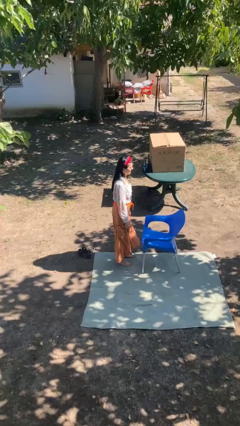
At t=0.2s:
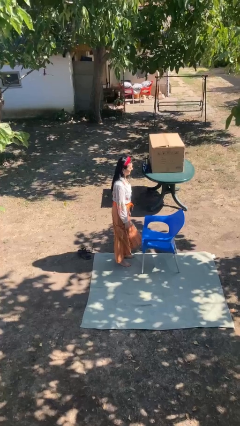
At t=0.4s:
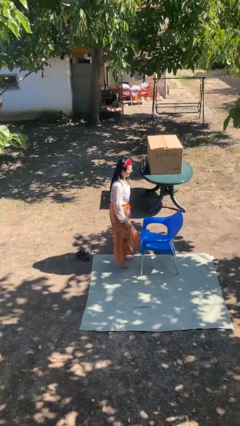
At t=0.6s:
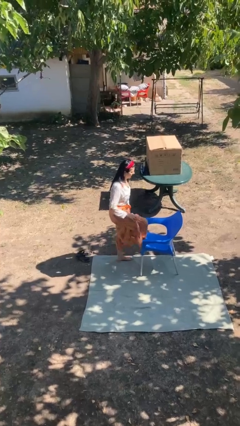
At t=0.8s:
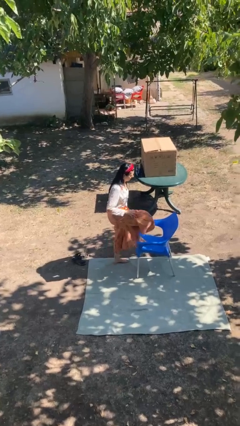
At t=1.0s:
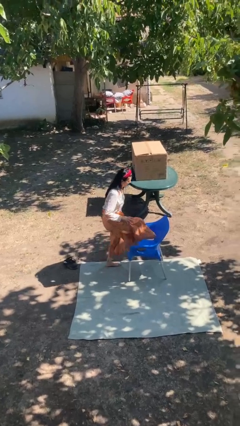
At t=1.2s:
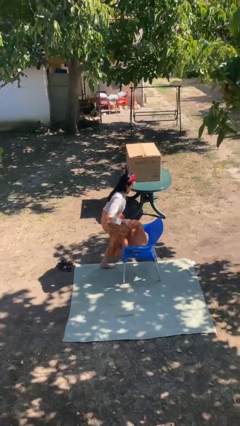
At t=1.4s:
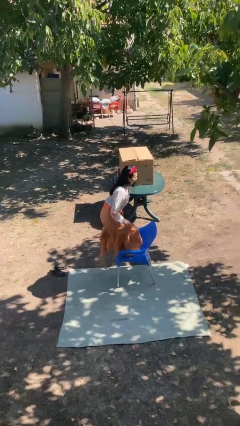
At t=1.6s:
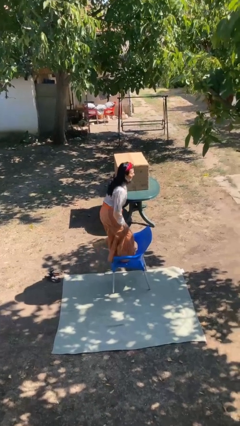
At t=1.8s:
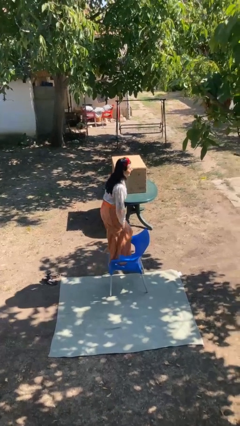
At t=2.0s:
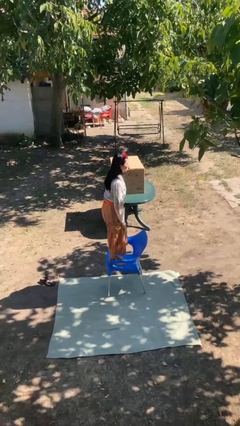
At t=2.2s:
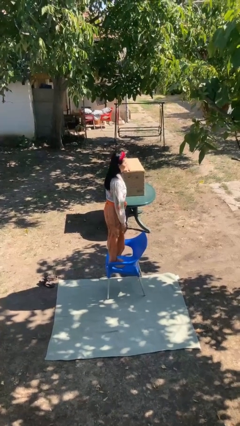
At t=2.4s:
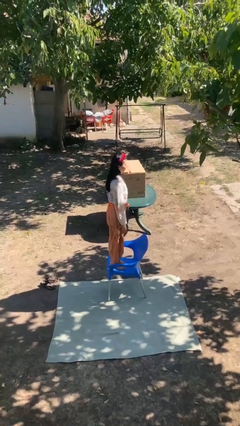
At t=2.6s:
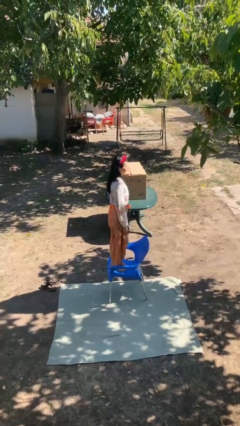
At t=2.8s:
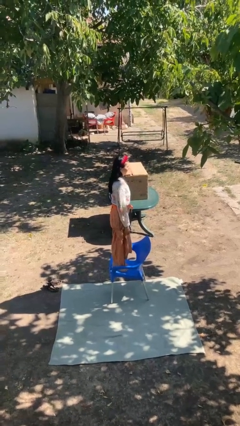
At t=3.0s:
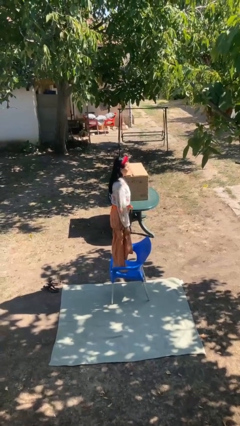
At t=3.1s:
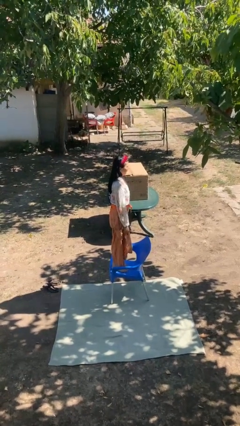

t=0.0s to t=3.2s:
person climbs on chair

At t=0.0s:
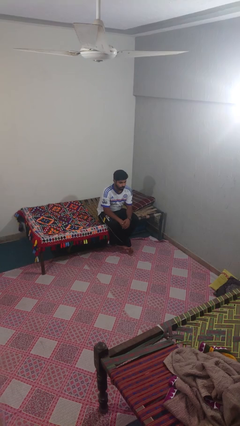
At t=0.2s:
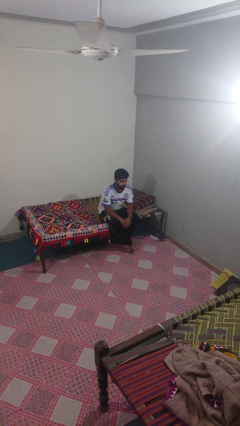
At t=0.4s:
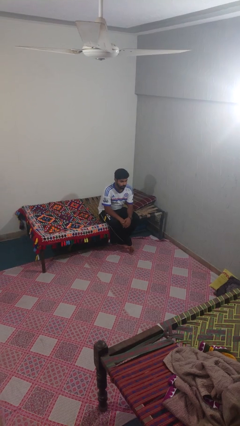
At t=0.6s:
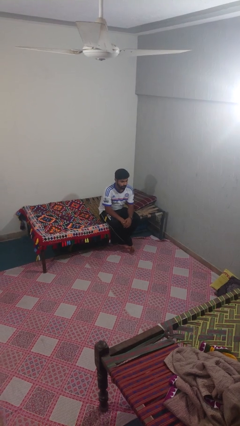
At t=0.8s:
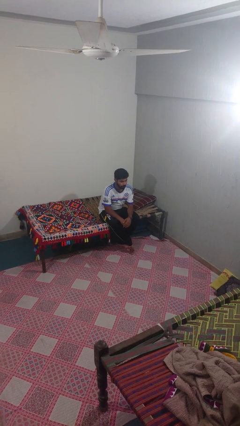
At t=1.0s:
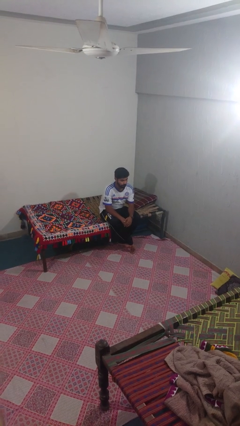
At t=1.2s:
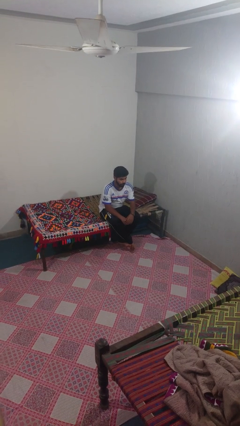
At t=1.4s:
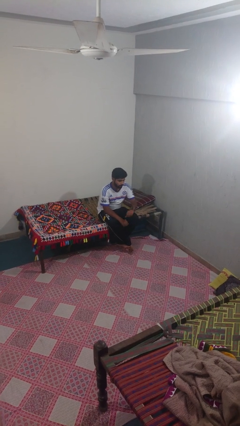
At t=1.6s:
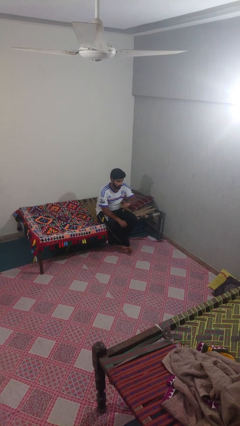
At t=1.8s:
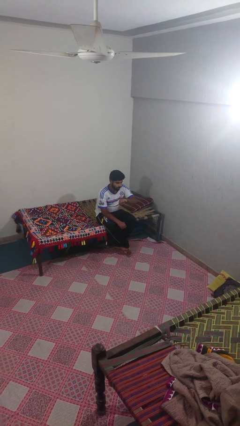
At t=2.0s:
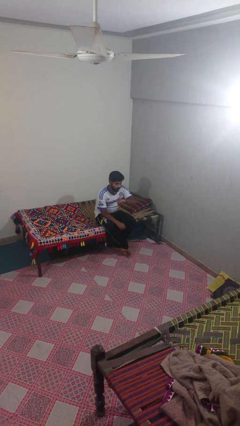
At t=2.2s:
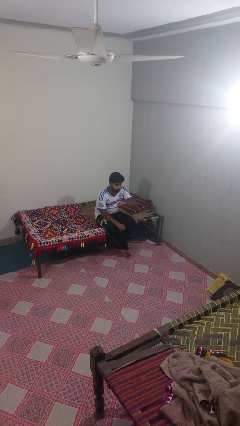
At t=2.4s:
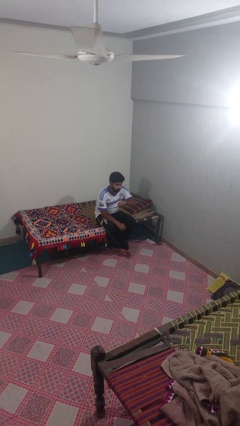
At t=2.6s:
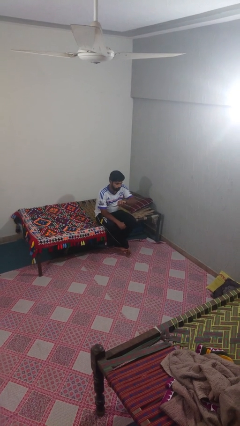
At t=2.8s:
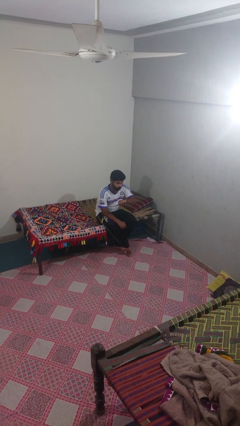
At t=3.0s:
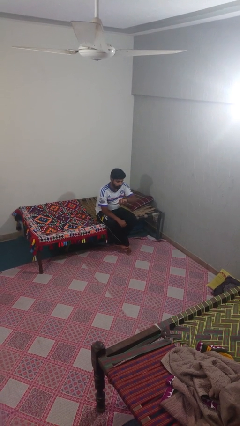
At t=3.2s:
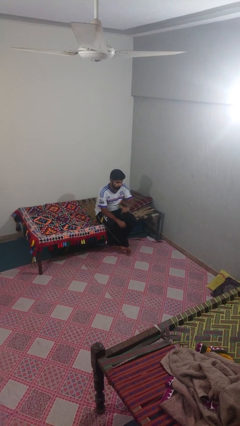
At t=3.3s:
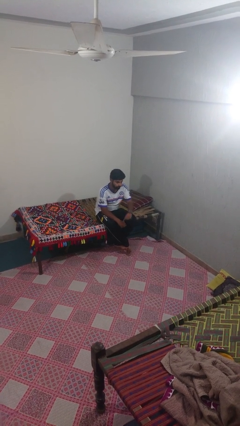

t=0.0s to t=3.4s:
person looks at wristwatch

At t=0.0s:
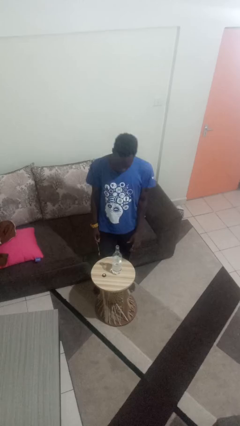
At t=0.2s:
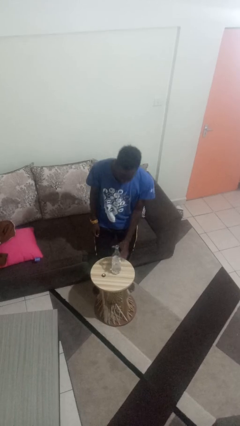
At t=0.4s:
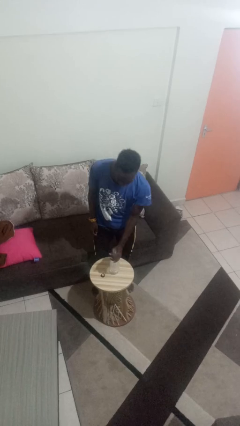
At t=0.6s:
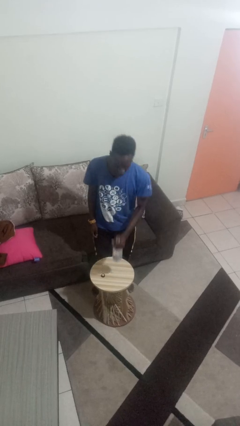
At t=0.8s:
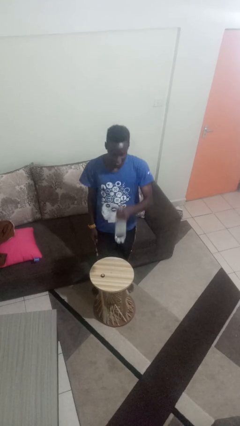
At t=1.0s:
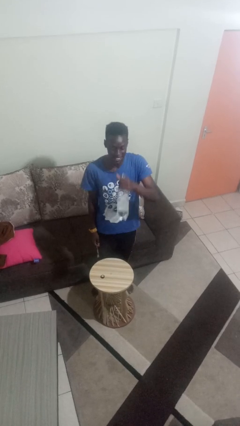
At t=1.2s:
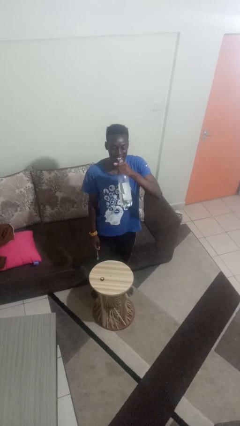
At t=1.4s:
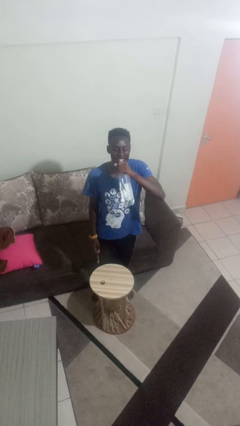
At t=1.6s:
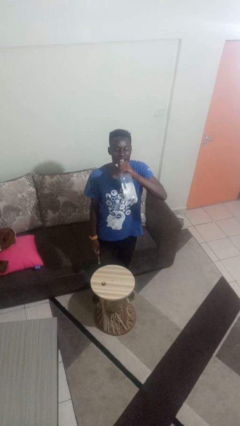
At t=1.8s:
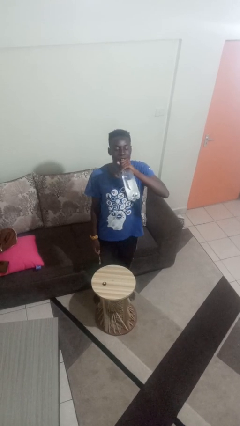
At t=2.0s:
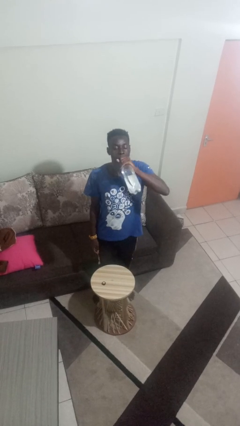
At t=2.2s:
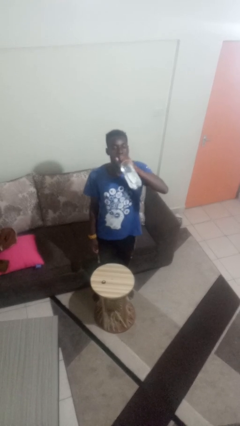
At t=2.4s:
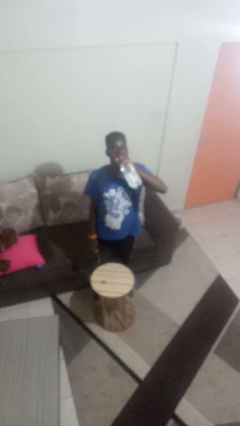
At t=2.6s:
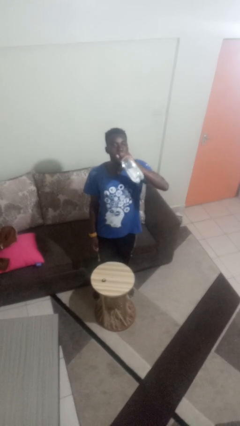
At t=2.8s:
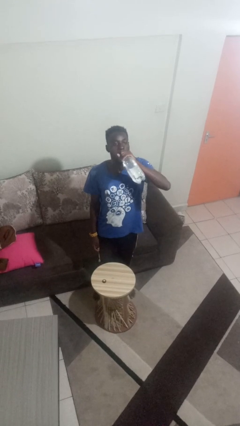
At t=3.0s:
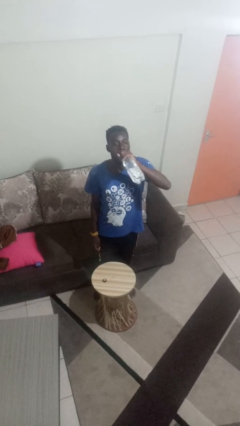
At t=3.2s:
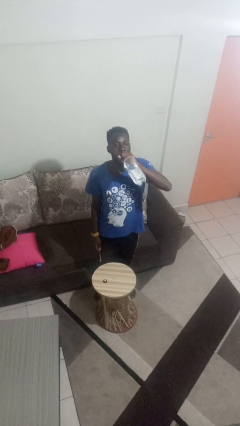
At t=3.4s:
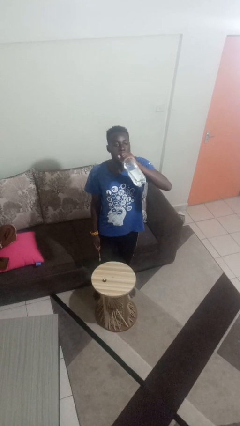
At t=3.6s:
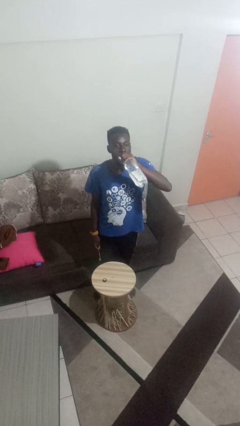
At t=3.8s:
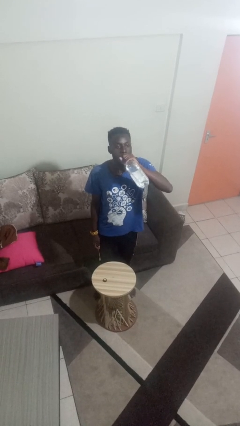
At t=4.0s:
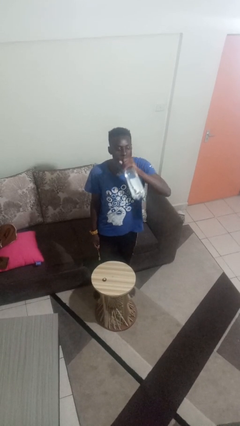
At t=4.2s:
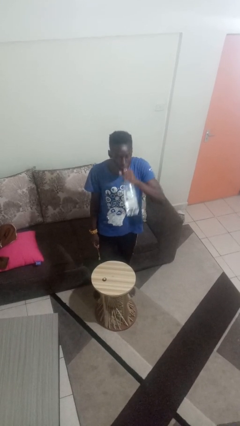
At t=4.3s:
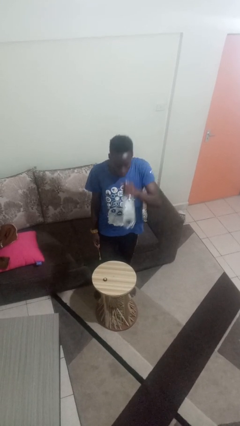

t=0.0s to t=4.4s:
person drinks from bottle

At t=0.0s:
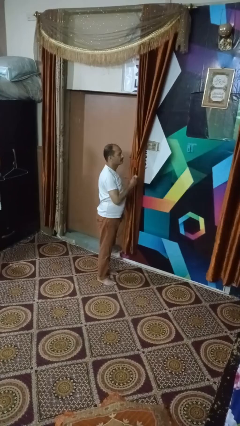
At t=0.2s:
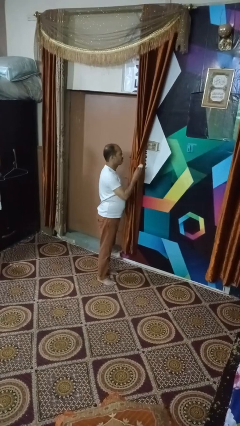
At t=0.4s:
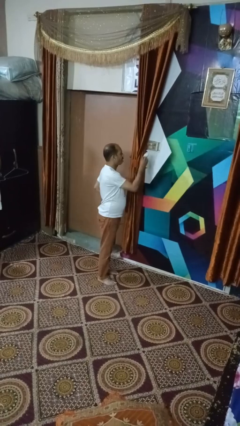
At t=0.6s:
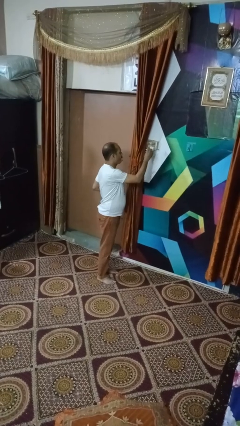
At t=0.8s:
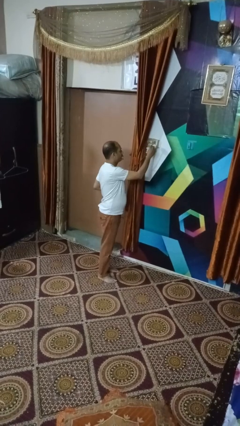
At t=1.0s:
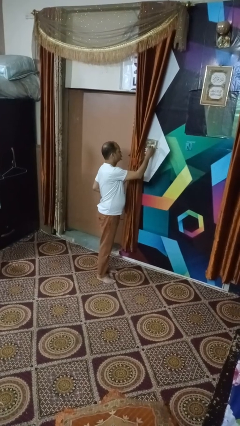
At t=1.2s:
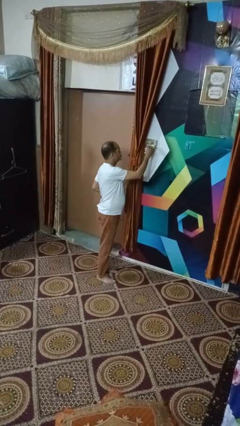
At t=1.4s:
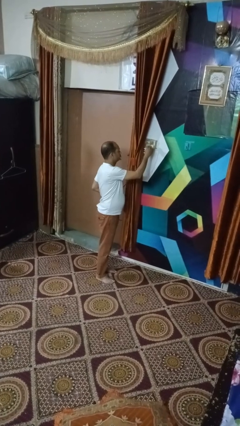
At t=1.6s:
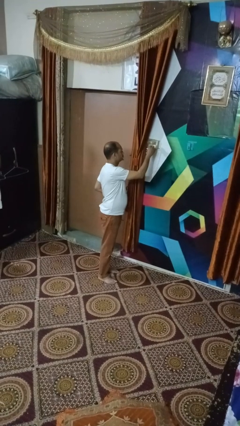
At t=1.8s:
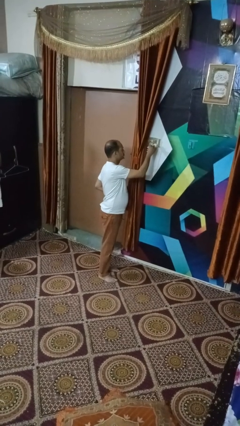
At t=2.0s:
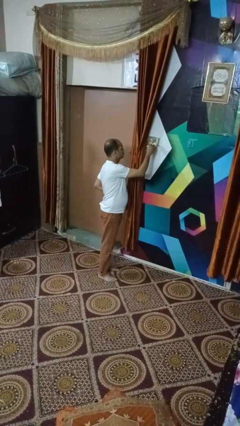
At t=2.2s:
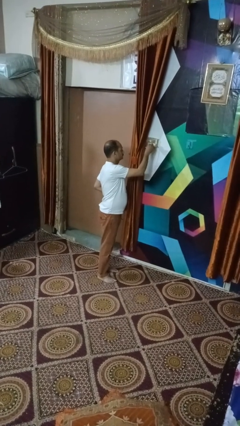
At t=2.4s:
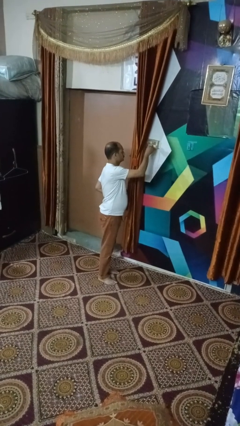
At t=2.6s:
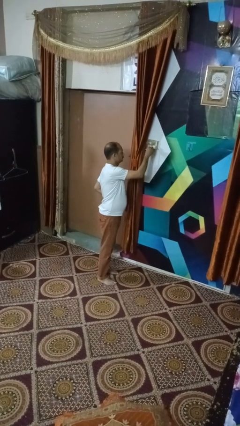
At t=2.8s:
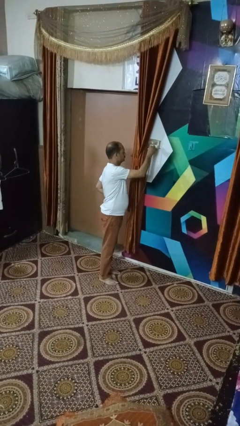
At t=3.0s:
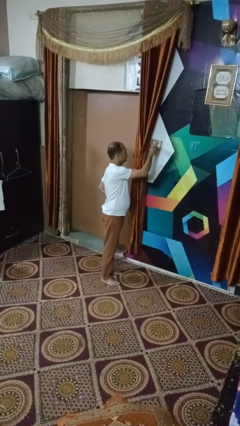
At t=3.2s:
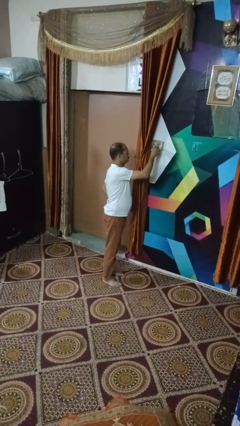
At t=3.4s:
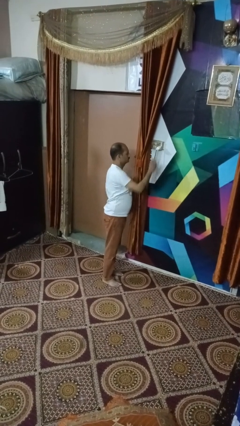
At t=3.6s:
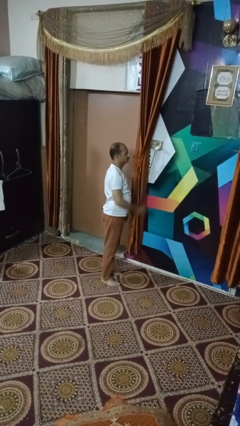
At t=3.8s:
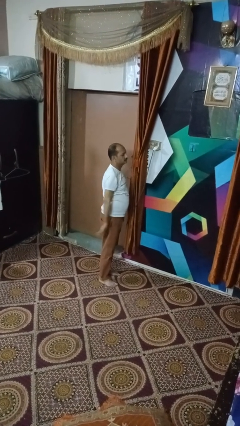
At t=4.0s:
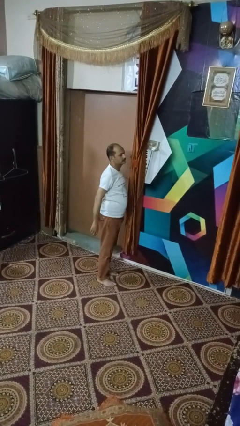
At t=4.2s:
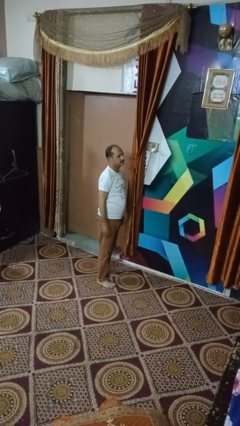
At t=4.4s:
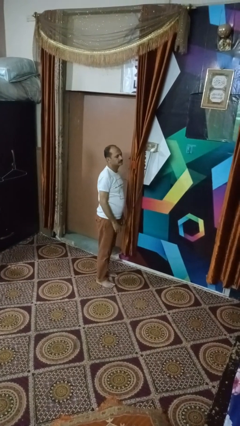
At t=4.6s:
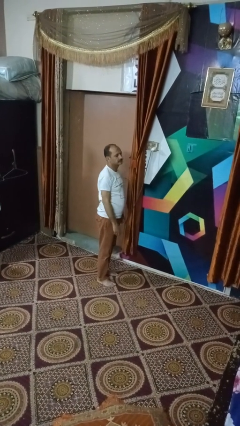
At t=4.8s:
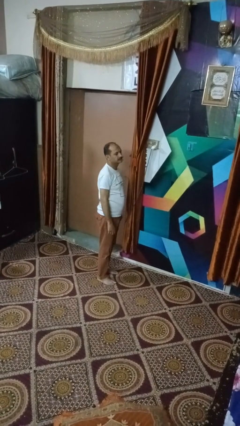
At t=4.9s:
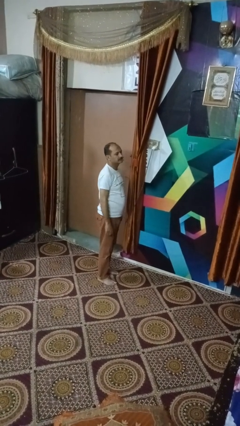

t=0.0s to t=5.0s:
person plugs into electrical socket

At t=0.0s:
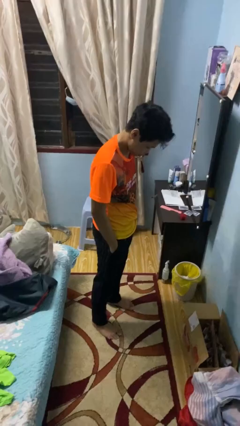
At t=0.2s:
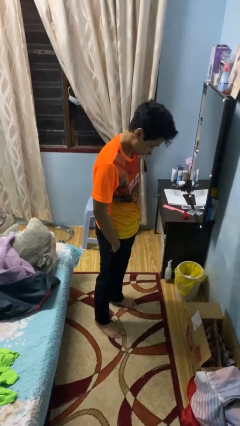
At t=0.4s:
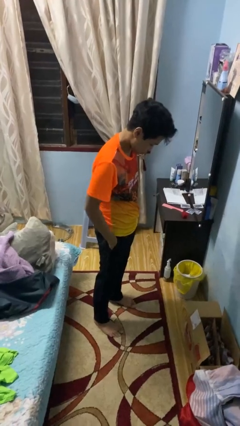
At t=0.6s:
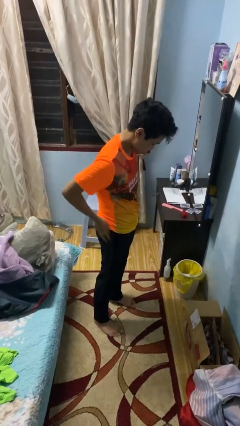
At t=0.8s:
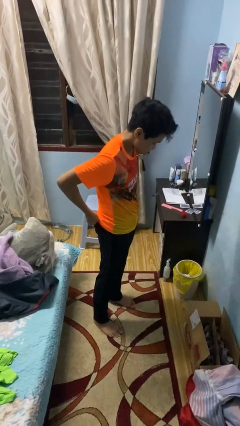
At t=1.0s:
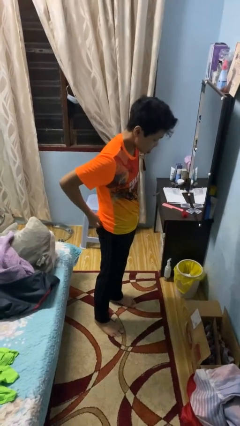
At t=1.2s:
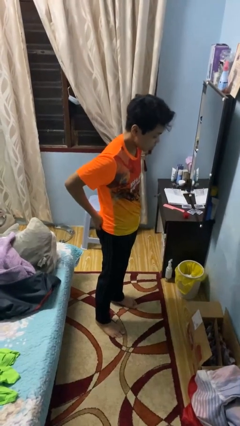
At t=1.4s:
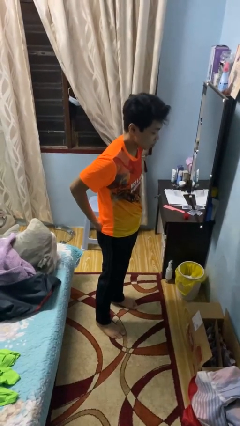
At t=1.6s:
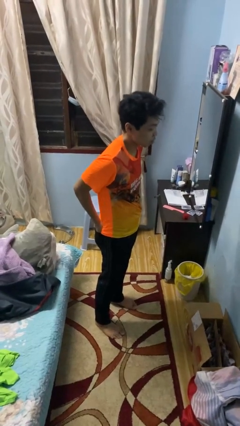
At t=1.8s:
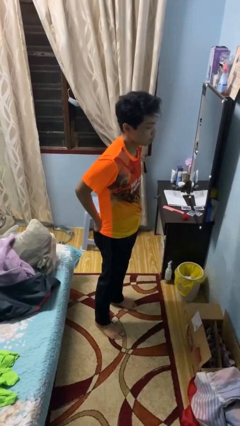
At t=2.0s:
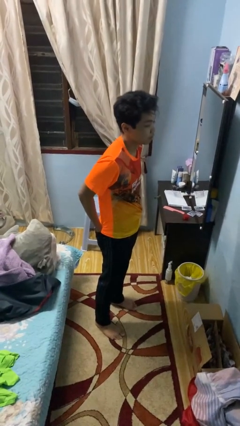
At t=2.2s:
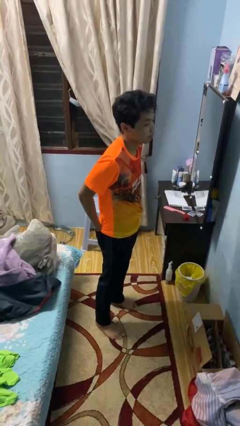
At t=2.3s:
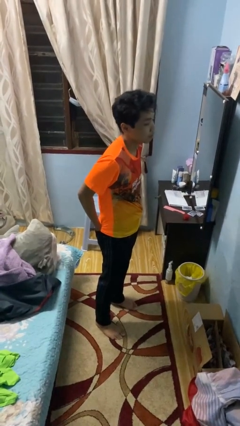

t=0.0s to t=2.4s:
person puts hands in back pockets
